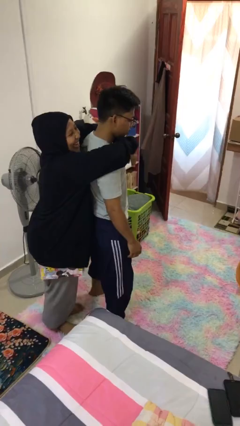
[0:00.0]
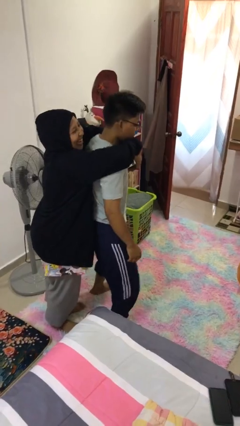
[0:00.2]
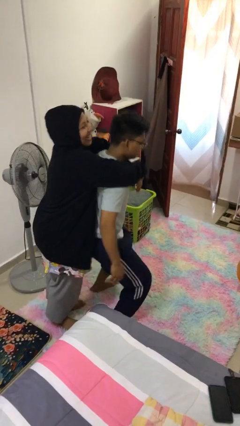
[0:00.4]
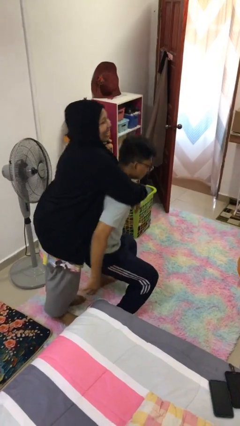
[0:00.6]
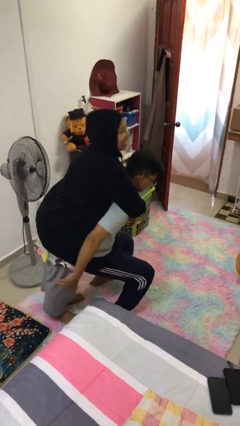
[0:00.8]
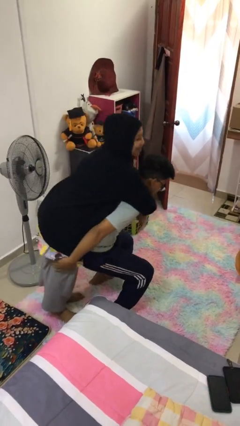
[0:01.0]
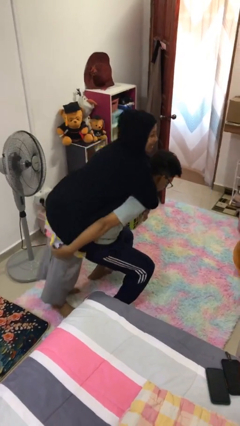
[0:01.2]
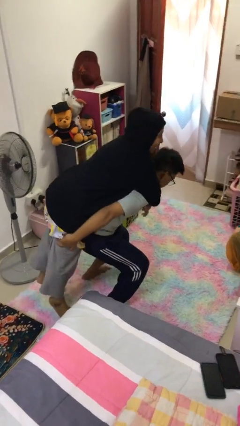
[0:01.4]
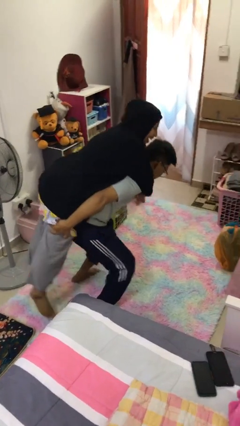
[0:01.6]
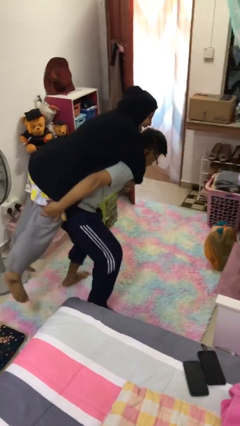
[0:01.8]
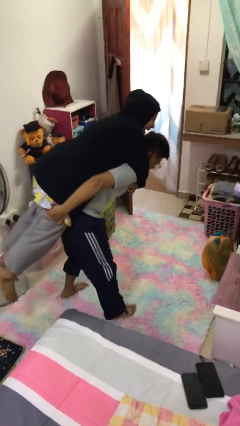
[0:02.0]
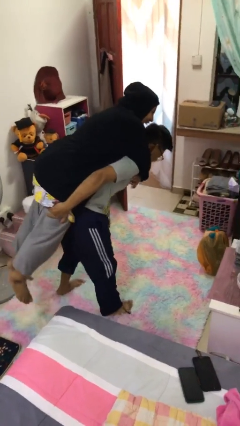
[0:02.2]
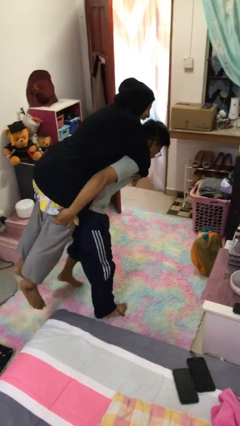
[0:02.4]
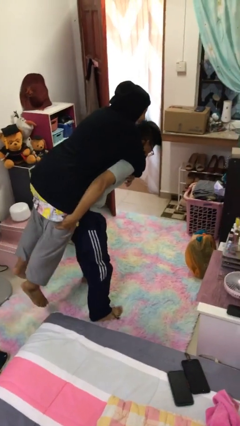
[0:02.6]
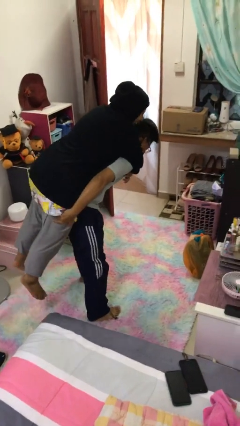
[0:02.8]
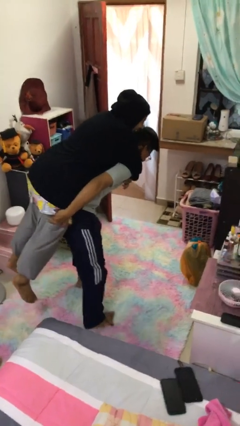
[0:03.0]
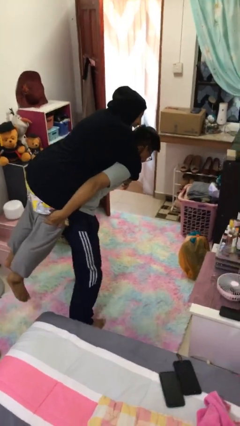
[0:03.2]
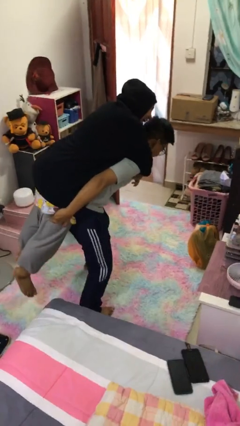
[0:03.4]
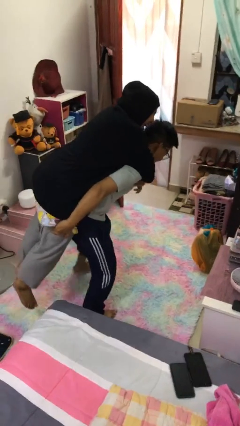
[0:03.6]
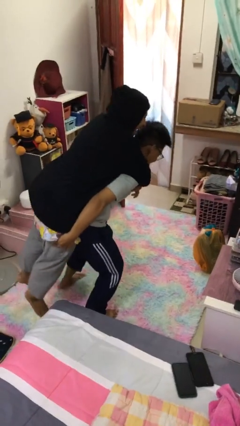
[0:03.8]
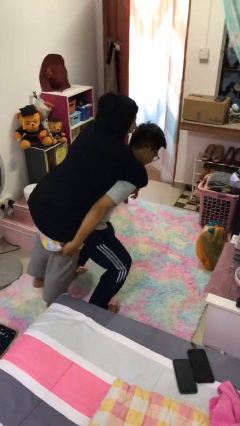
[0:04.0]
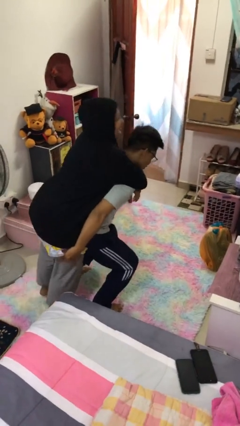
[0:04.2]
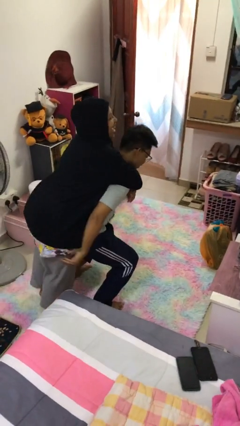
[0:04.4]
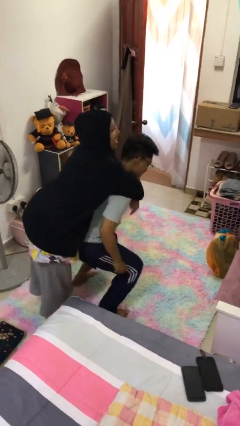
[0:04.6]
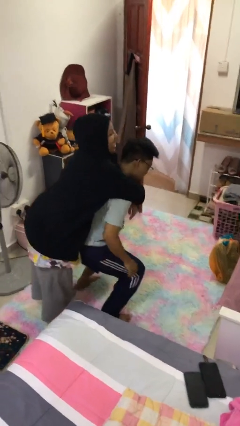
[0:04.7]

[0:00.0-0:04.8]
person carries person on back

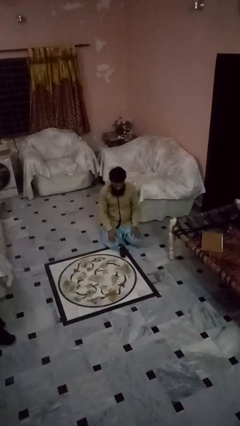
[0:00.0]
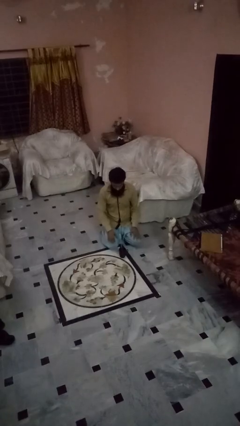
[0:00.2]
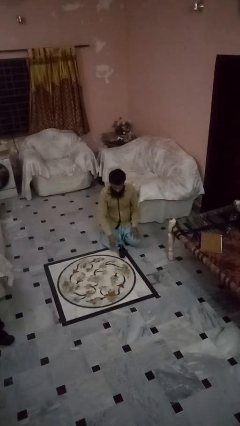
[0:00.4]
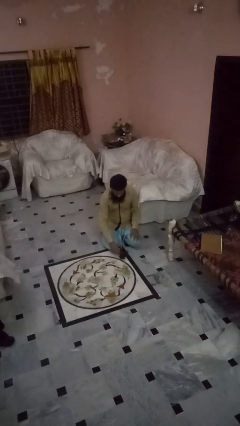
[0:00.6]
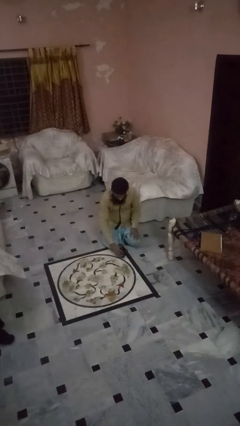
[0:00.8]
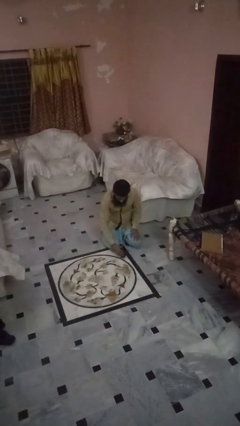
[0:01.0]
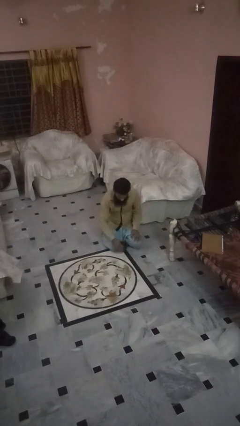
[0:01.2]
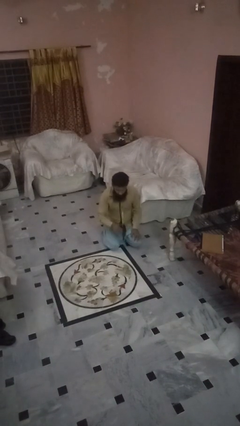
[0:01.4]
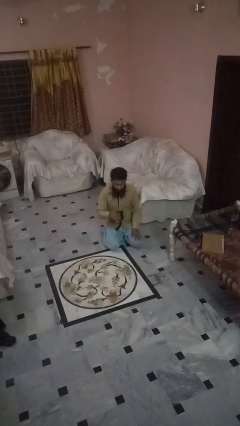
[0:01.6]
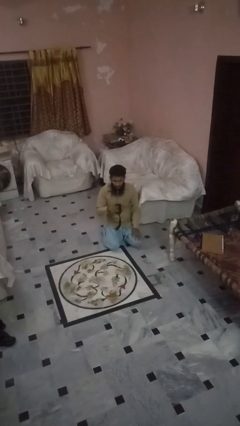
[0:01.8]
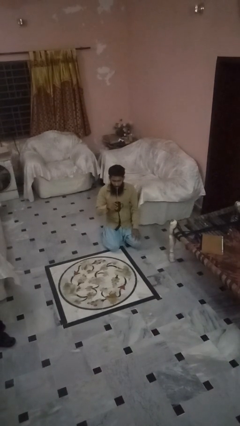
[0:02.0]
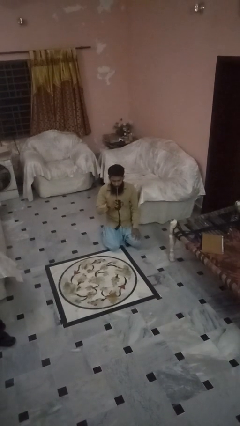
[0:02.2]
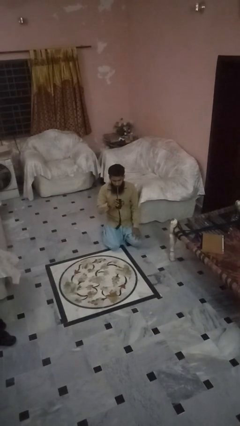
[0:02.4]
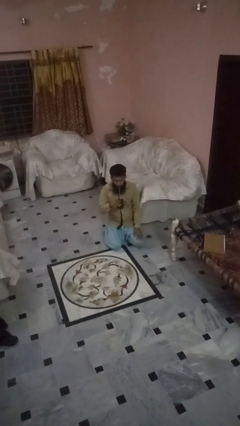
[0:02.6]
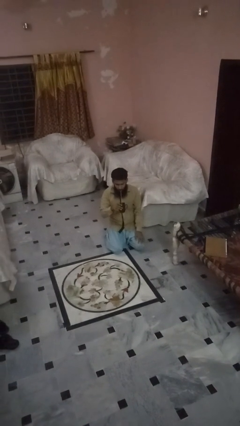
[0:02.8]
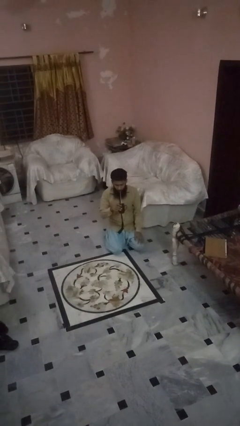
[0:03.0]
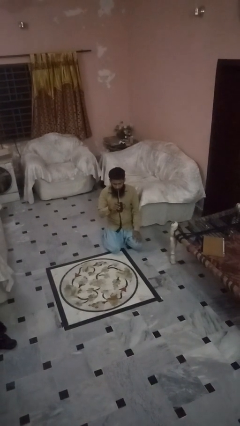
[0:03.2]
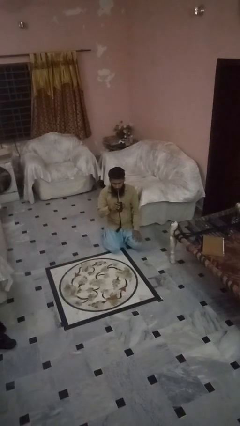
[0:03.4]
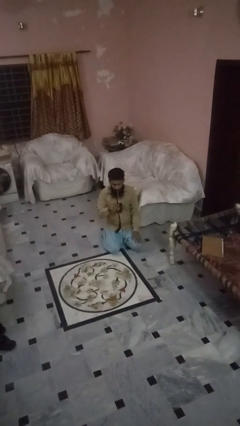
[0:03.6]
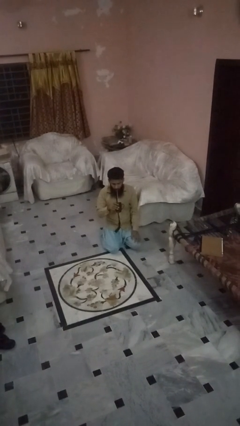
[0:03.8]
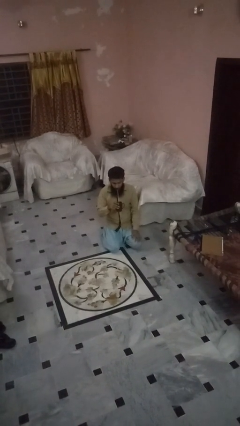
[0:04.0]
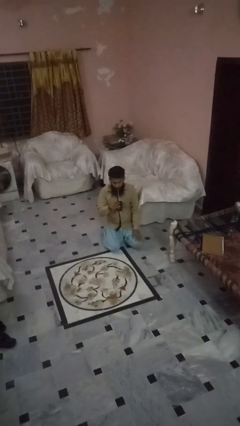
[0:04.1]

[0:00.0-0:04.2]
person drinks from straw

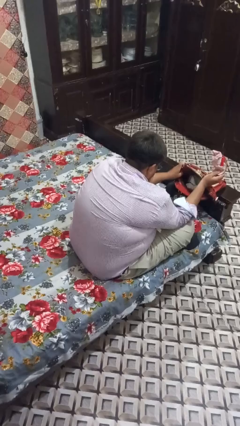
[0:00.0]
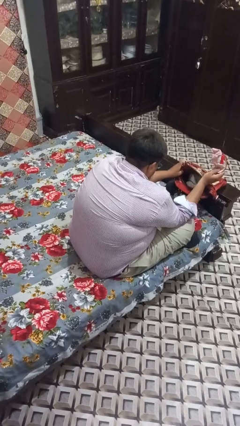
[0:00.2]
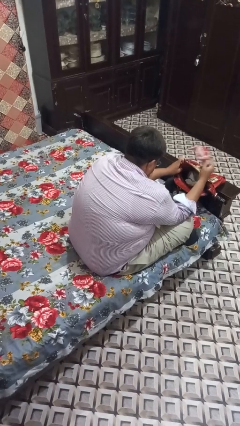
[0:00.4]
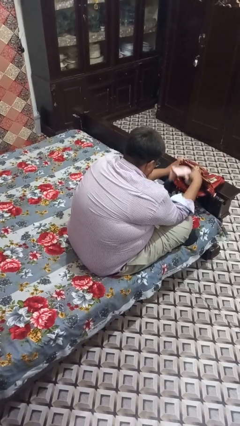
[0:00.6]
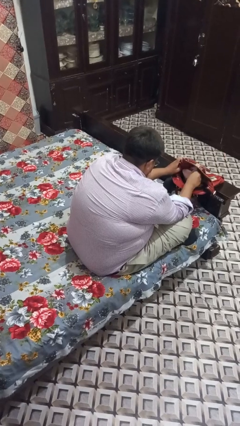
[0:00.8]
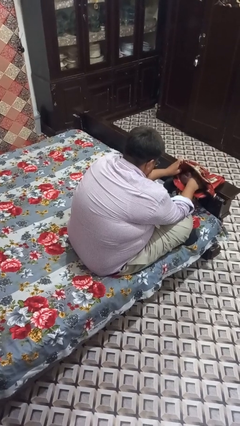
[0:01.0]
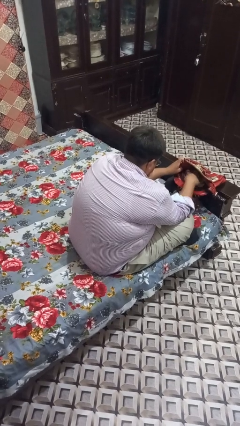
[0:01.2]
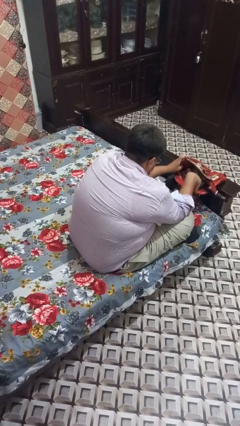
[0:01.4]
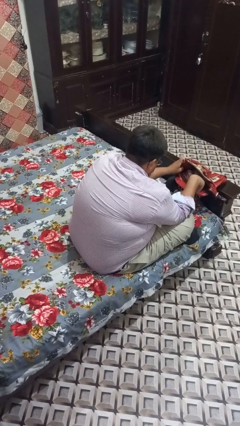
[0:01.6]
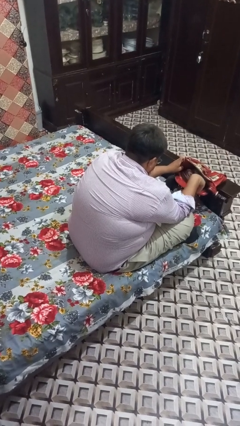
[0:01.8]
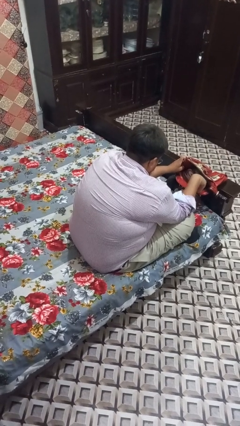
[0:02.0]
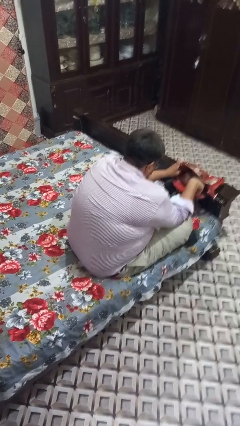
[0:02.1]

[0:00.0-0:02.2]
person puts object into purse

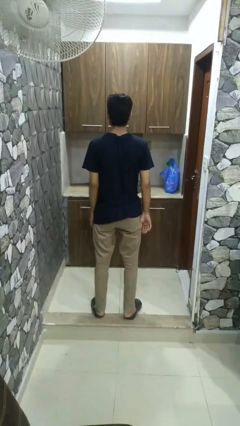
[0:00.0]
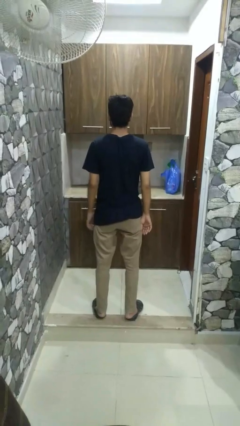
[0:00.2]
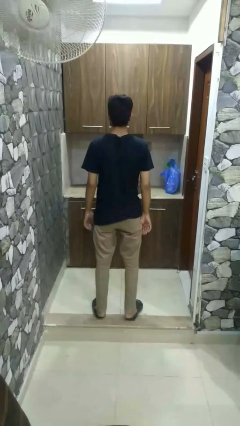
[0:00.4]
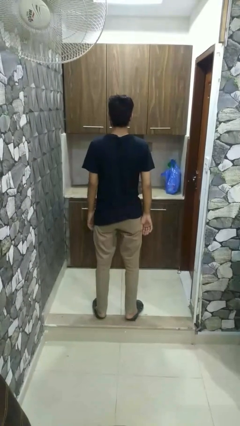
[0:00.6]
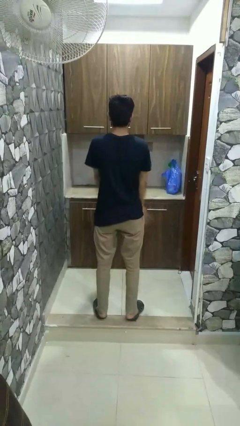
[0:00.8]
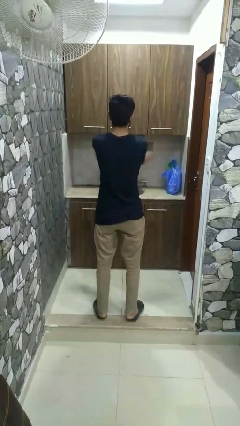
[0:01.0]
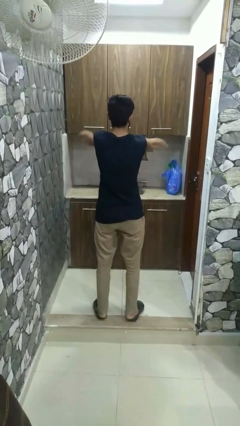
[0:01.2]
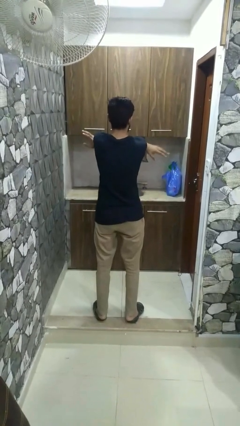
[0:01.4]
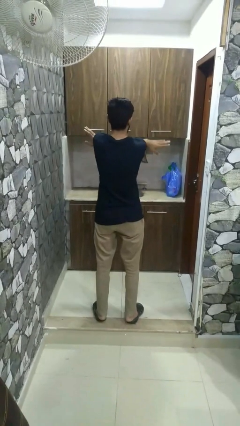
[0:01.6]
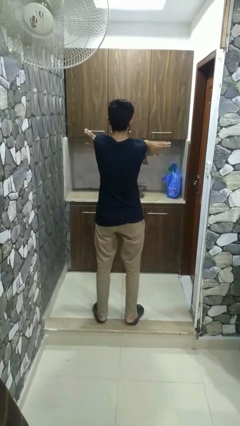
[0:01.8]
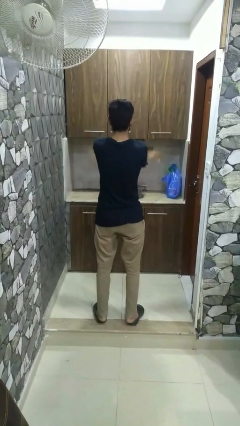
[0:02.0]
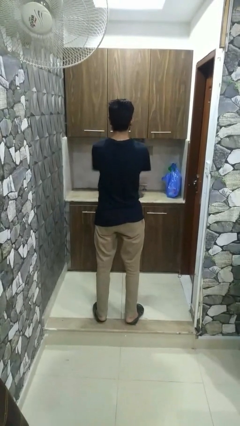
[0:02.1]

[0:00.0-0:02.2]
person crosses arms

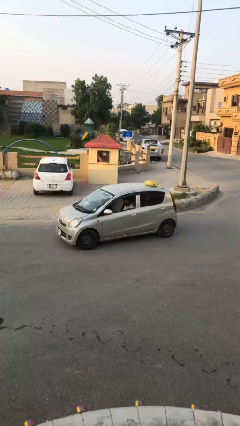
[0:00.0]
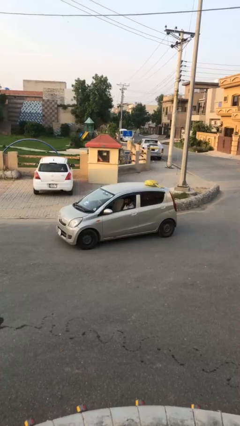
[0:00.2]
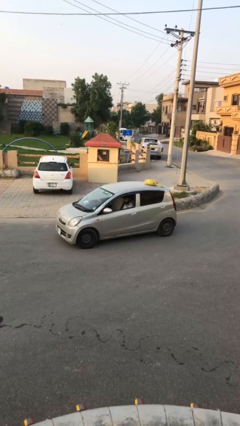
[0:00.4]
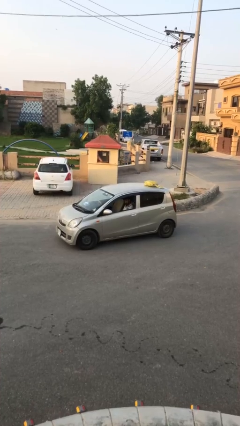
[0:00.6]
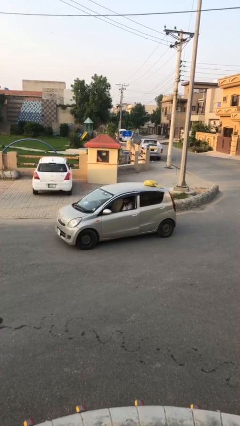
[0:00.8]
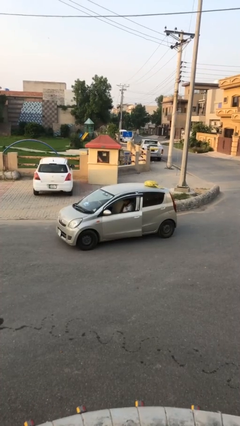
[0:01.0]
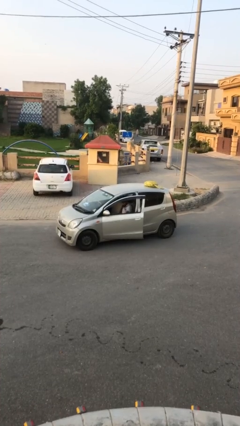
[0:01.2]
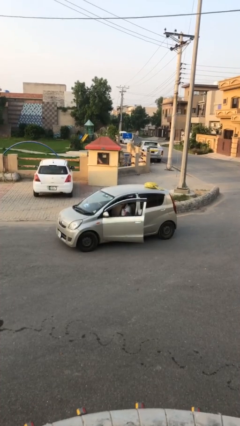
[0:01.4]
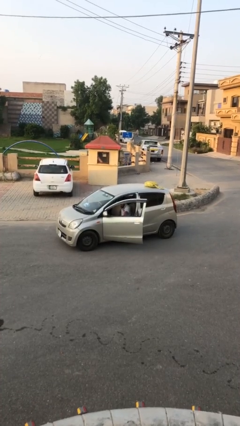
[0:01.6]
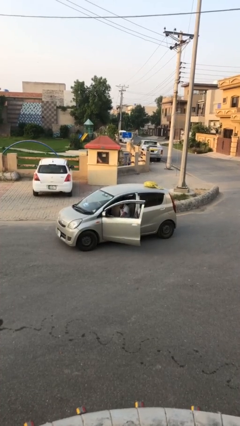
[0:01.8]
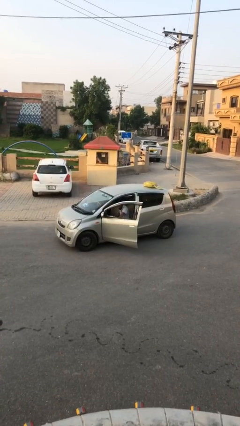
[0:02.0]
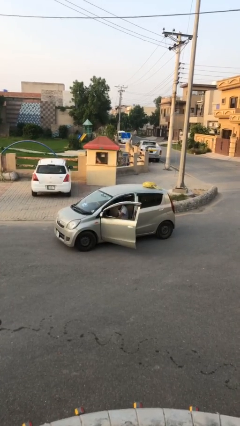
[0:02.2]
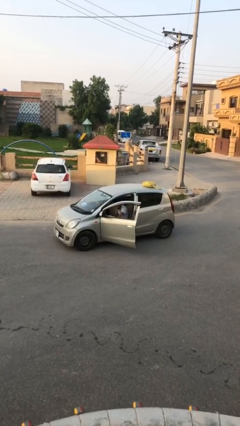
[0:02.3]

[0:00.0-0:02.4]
person opens car door

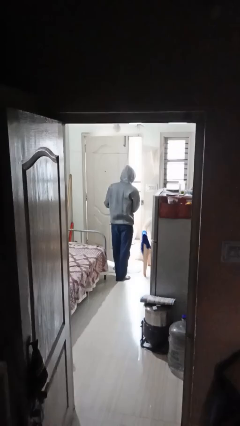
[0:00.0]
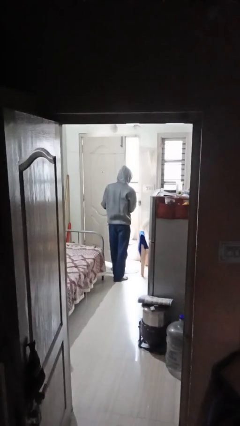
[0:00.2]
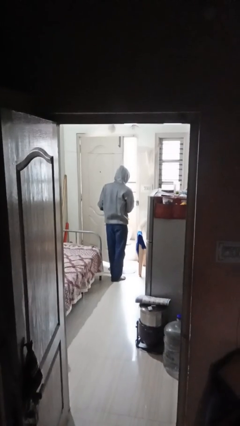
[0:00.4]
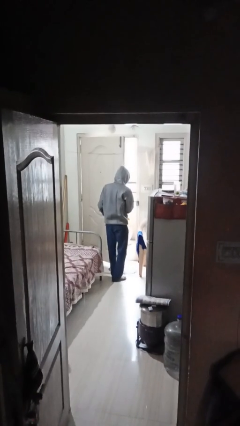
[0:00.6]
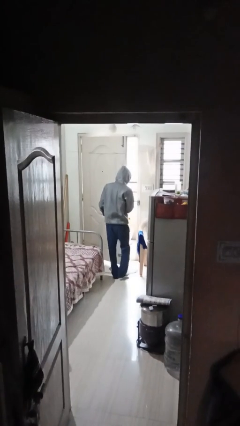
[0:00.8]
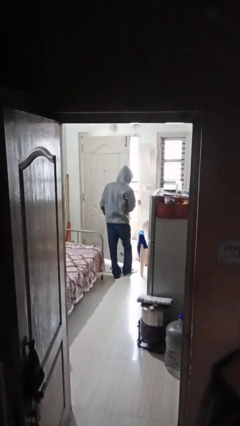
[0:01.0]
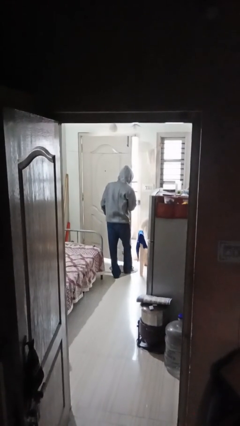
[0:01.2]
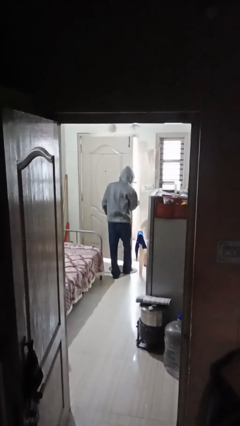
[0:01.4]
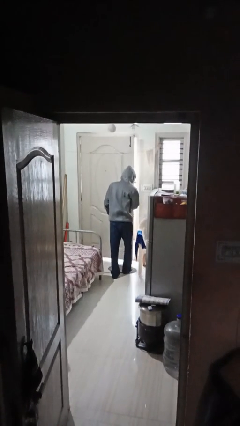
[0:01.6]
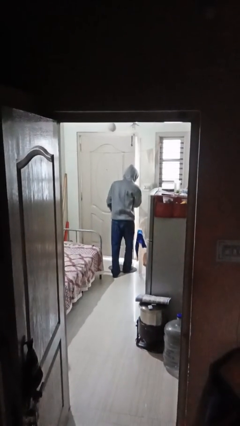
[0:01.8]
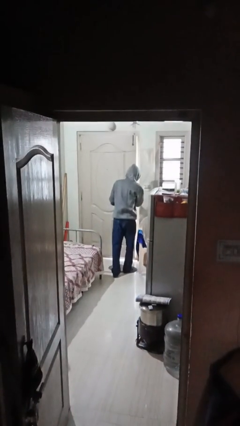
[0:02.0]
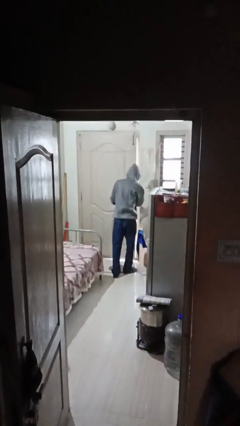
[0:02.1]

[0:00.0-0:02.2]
person closes facility door
